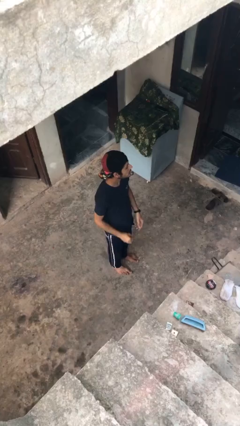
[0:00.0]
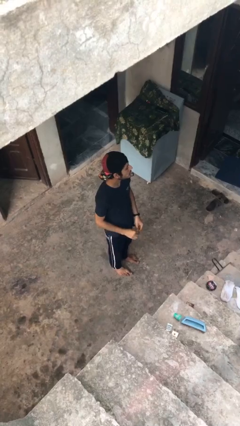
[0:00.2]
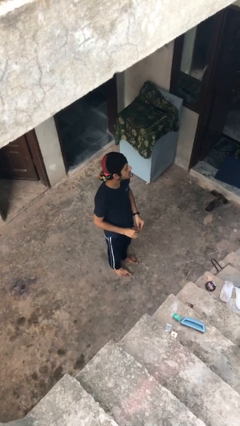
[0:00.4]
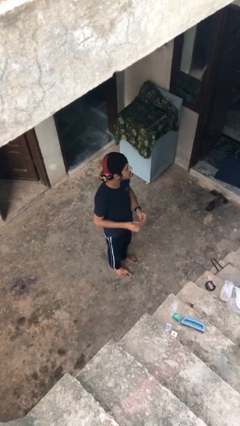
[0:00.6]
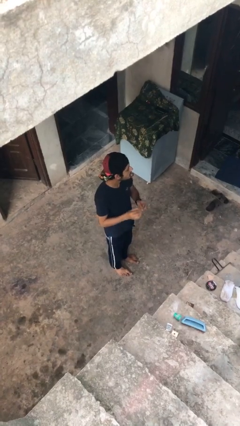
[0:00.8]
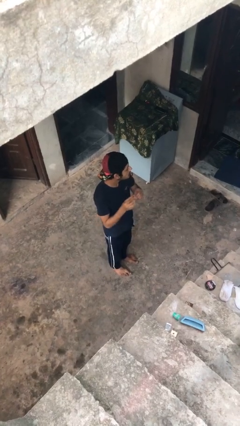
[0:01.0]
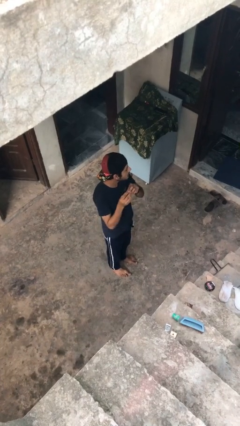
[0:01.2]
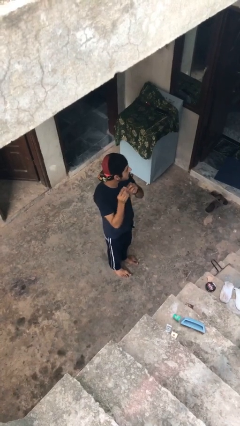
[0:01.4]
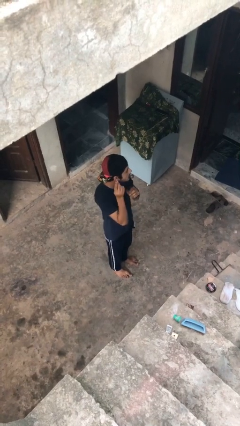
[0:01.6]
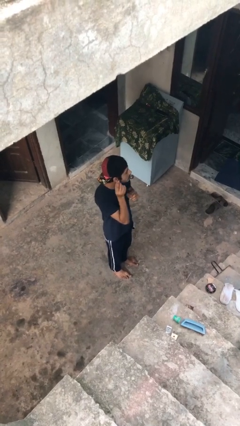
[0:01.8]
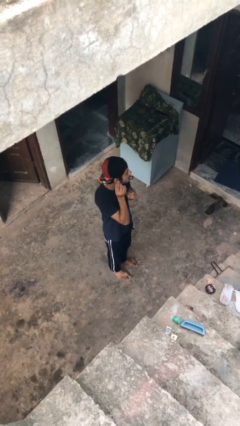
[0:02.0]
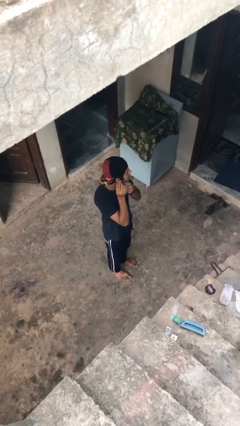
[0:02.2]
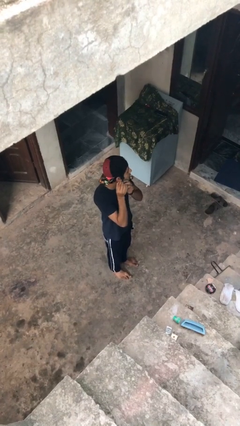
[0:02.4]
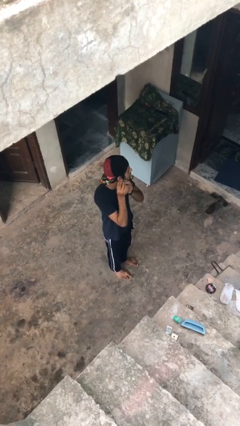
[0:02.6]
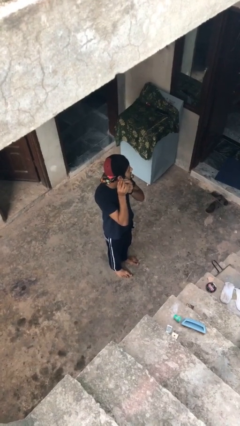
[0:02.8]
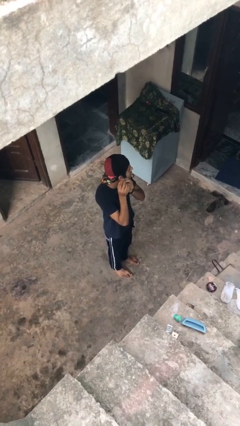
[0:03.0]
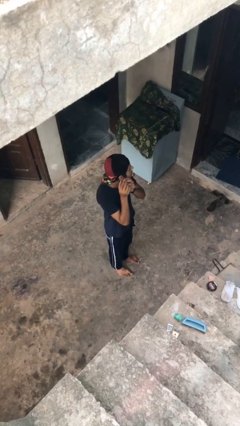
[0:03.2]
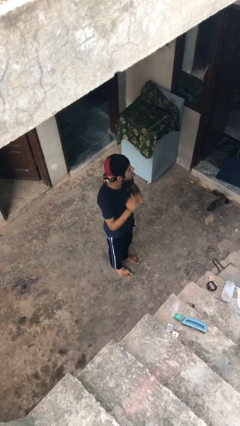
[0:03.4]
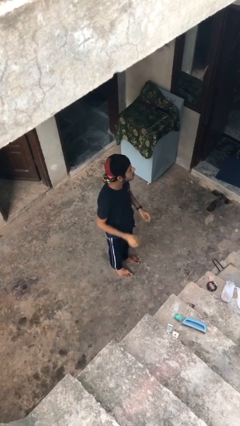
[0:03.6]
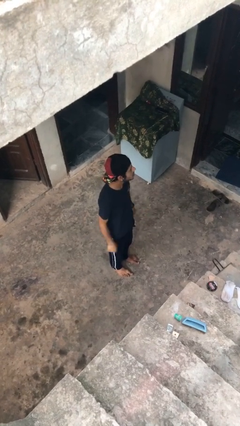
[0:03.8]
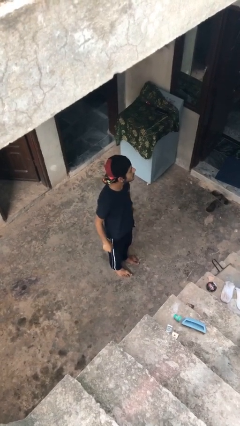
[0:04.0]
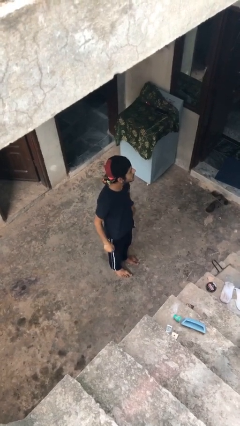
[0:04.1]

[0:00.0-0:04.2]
person puts on earrings

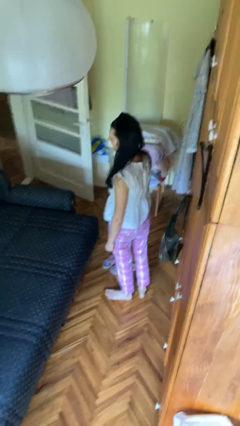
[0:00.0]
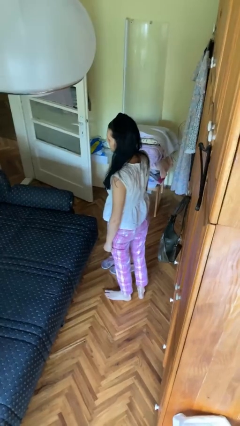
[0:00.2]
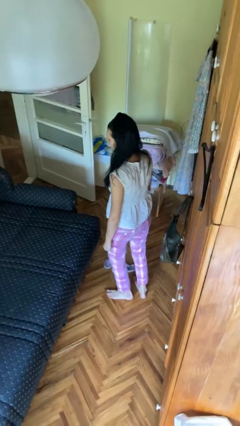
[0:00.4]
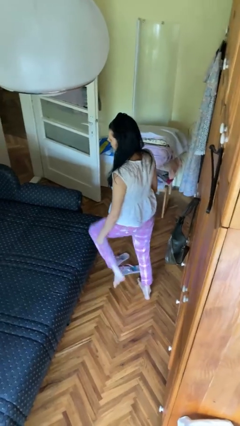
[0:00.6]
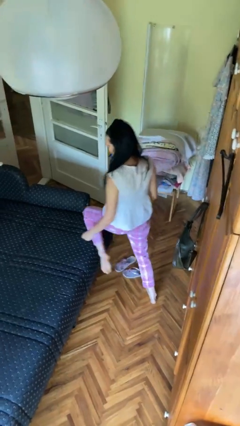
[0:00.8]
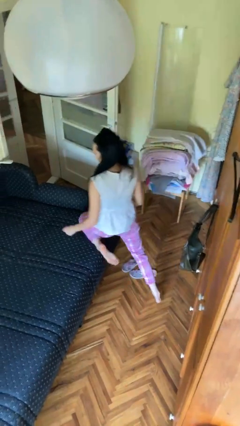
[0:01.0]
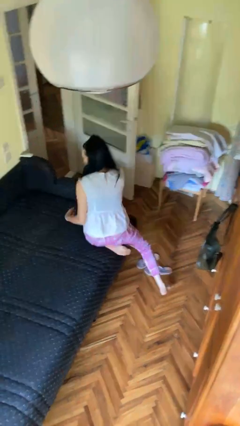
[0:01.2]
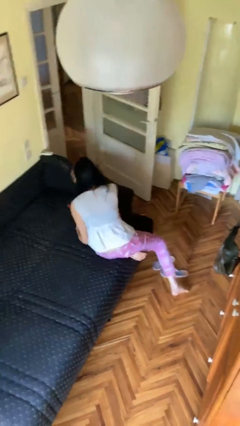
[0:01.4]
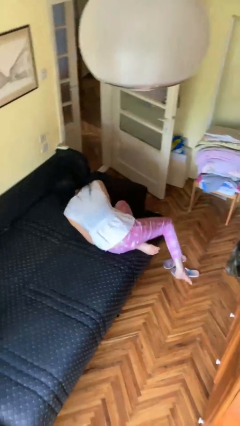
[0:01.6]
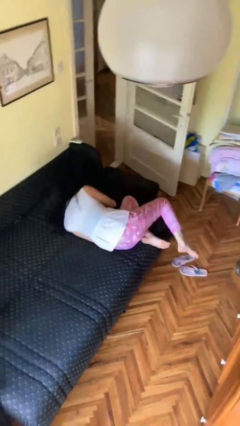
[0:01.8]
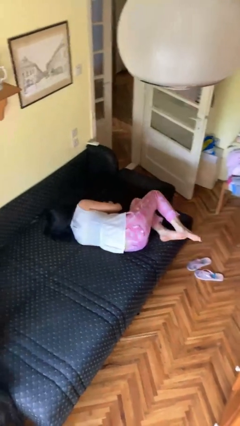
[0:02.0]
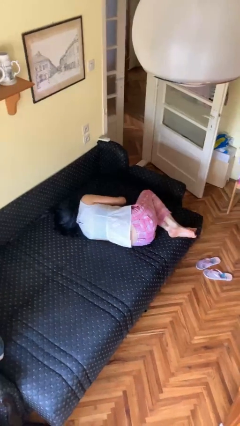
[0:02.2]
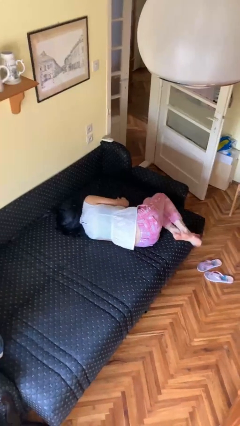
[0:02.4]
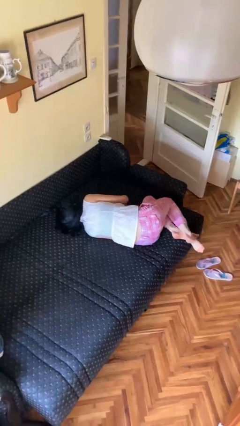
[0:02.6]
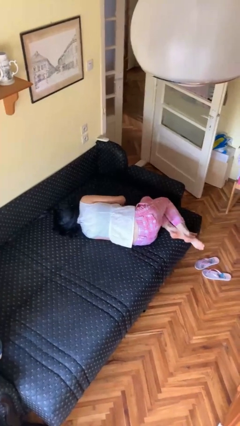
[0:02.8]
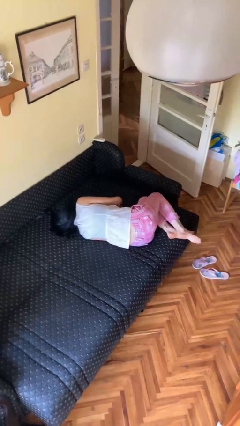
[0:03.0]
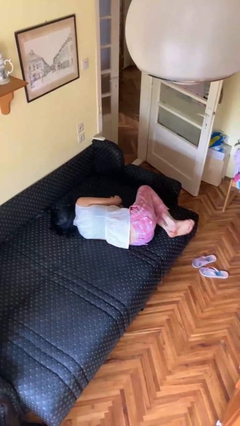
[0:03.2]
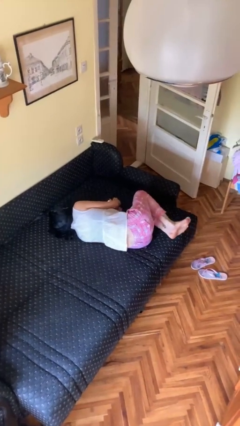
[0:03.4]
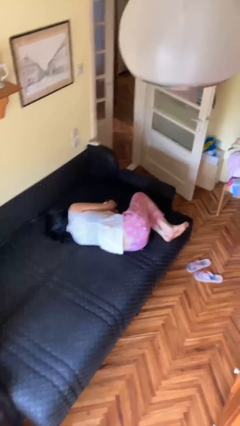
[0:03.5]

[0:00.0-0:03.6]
person lies down on bed

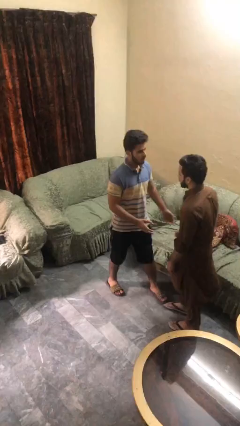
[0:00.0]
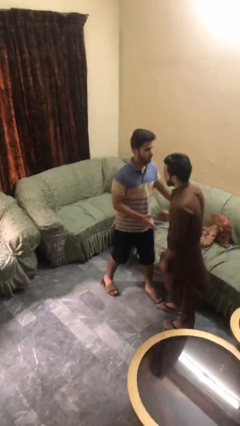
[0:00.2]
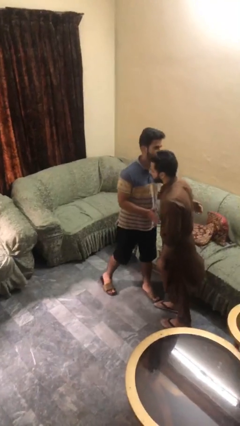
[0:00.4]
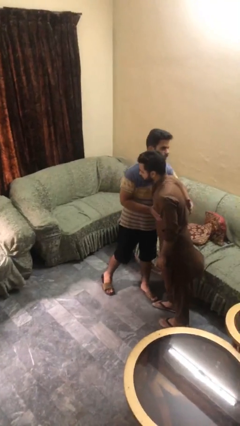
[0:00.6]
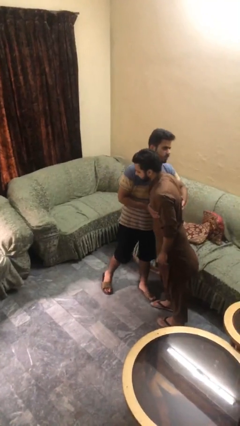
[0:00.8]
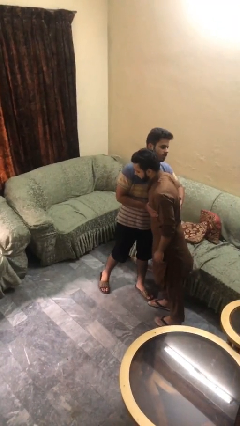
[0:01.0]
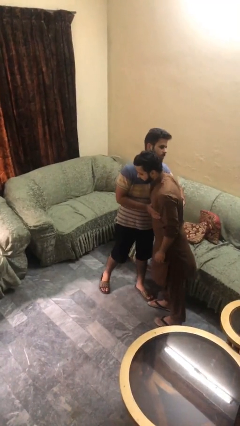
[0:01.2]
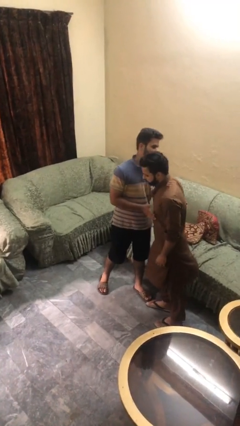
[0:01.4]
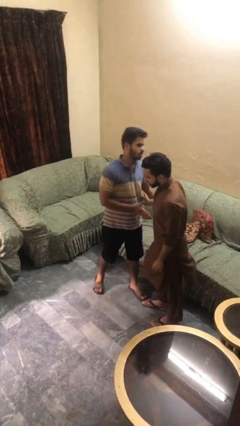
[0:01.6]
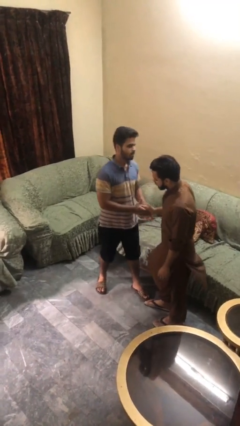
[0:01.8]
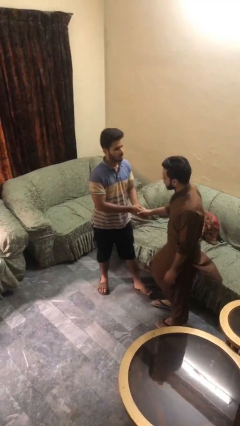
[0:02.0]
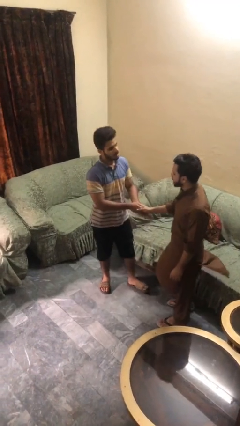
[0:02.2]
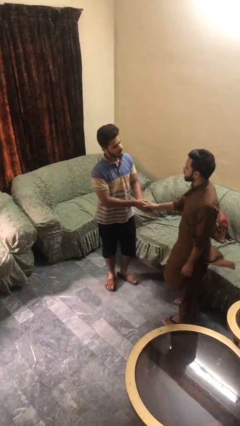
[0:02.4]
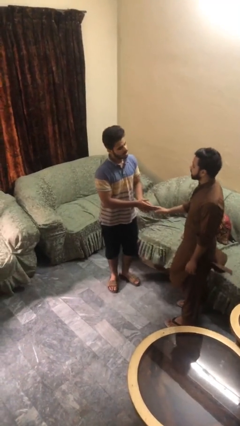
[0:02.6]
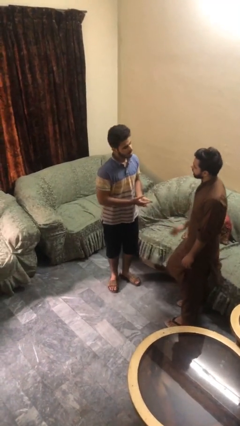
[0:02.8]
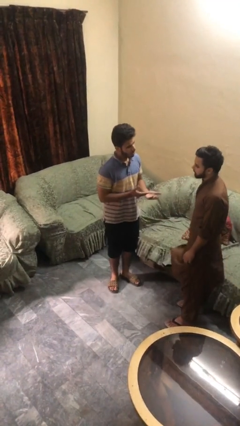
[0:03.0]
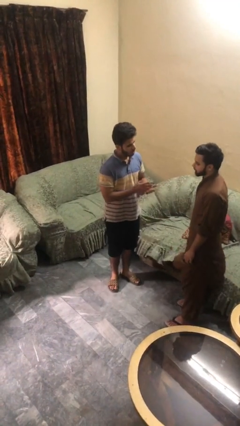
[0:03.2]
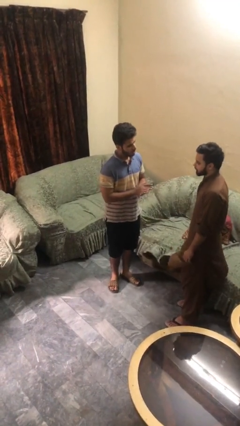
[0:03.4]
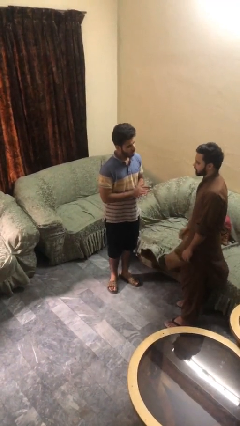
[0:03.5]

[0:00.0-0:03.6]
person embraces person

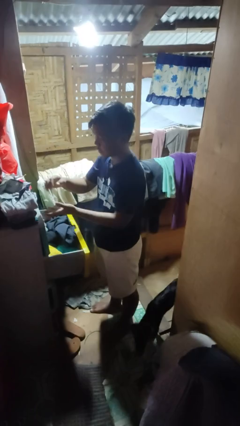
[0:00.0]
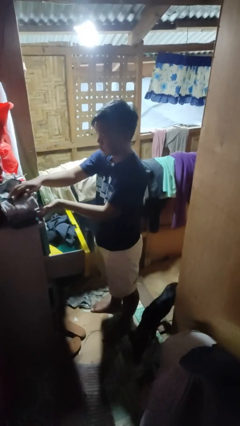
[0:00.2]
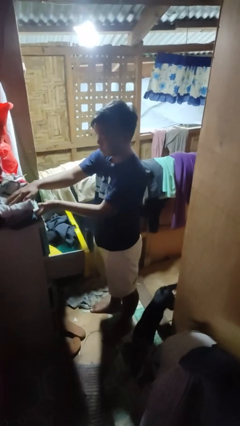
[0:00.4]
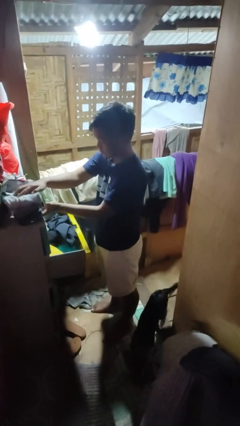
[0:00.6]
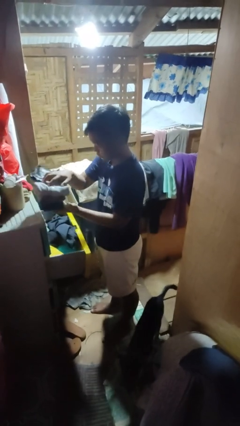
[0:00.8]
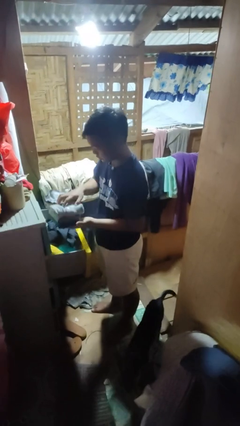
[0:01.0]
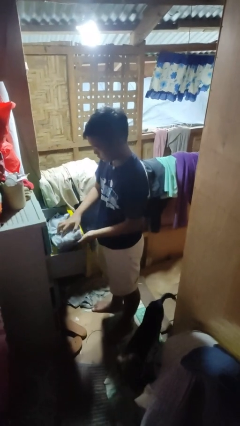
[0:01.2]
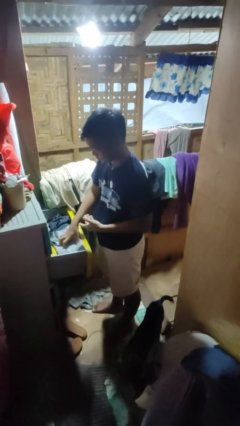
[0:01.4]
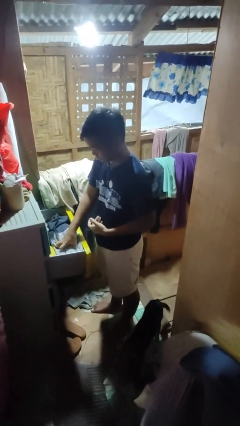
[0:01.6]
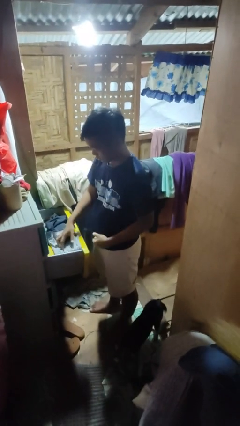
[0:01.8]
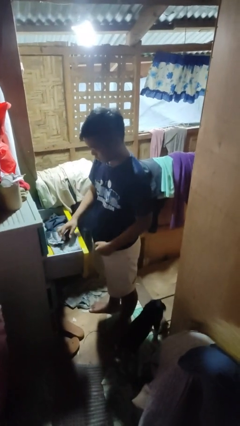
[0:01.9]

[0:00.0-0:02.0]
person puts clothes into dresser

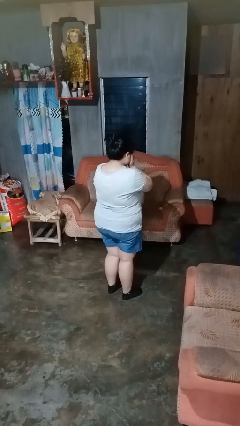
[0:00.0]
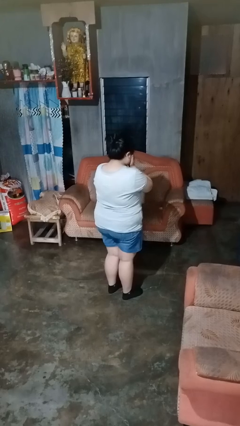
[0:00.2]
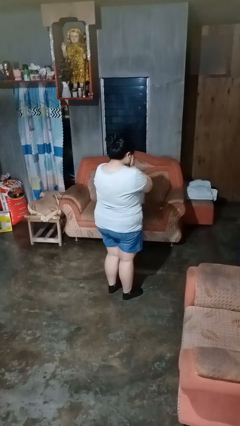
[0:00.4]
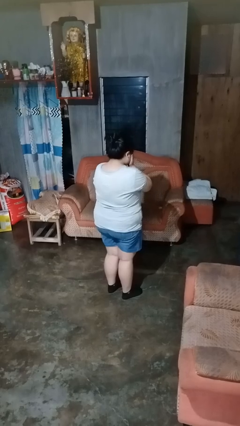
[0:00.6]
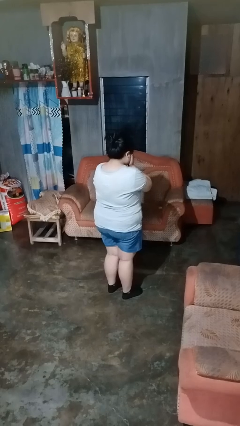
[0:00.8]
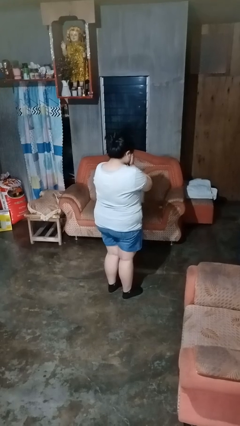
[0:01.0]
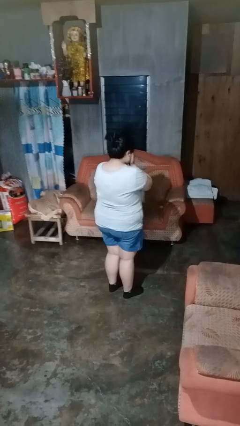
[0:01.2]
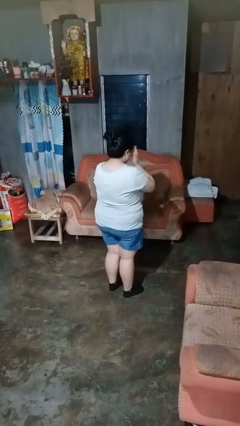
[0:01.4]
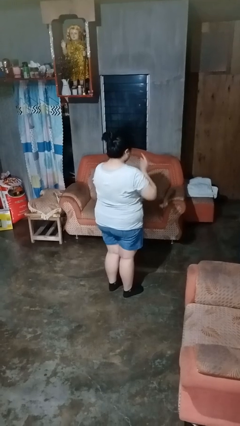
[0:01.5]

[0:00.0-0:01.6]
person covers face with hands

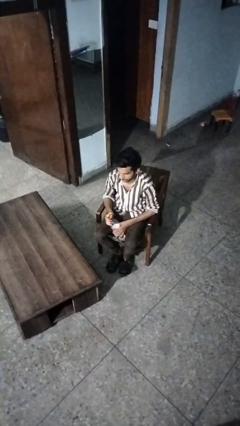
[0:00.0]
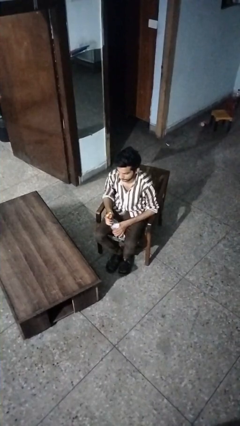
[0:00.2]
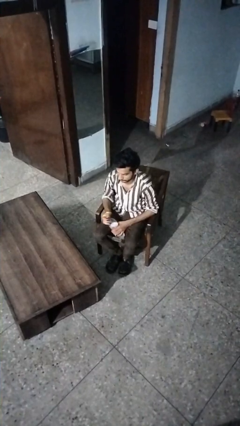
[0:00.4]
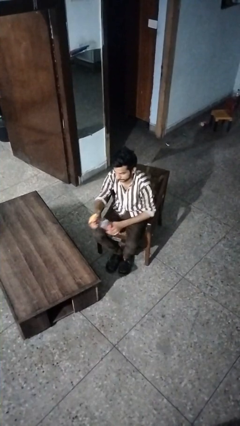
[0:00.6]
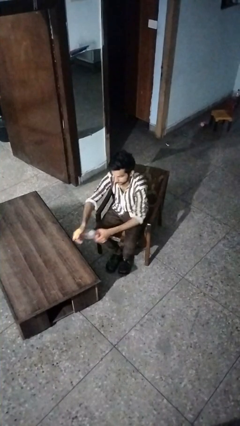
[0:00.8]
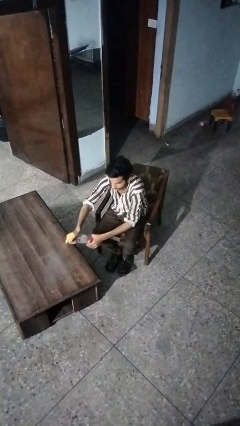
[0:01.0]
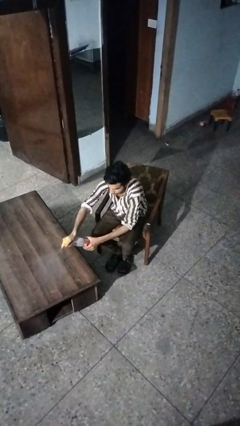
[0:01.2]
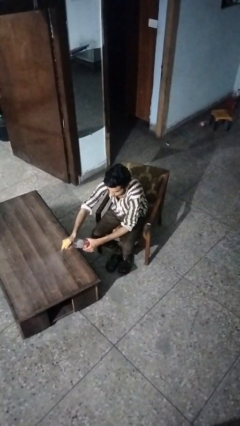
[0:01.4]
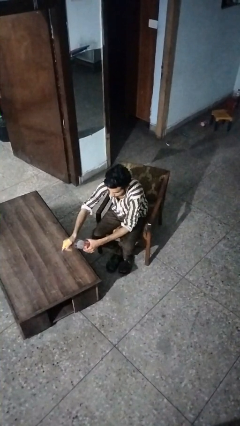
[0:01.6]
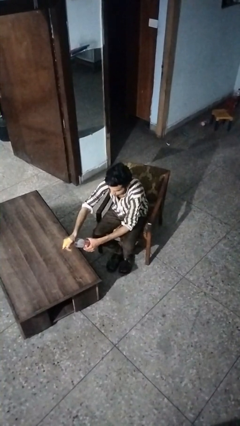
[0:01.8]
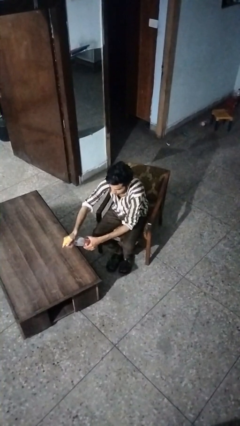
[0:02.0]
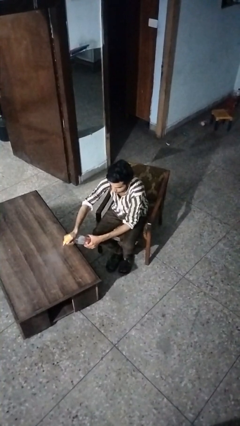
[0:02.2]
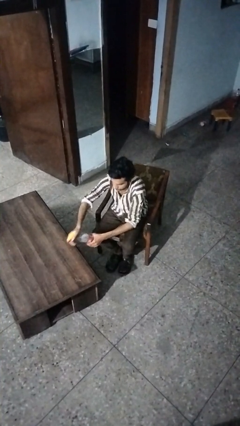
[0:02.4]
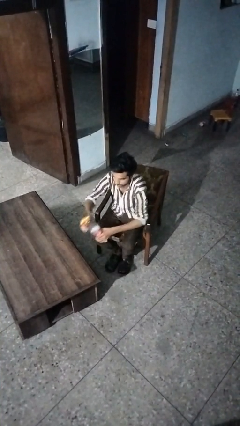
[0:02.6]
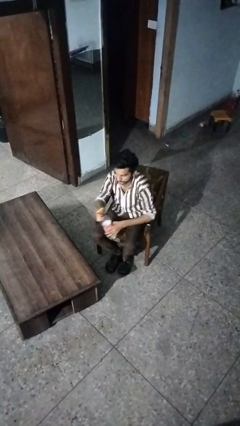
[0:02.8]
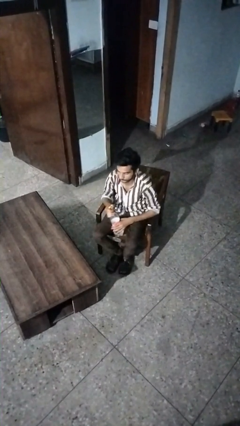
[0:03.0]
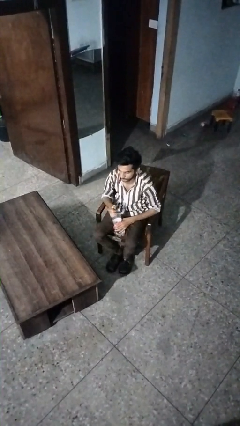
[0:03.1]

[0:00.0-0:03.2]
person sprays from bottle
